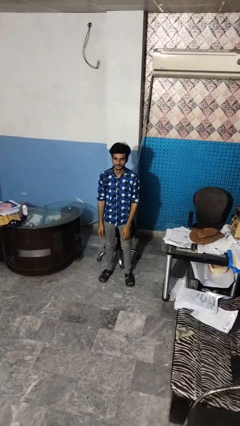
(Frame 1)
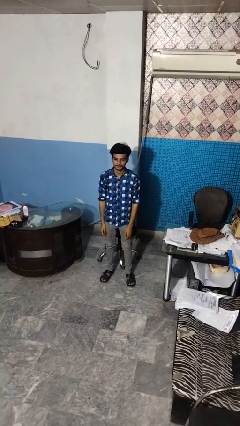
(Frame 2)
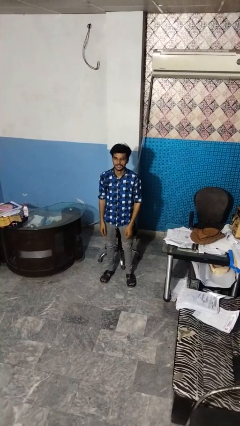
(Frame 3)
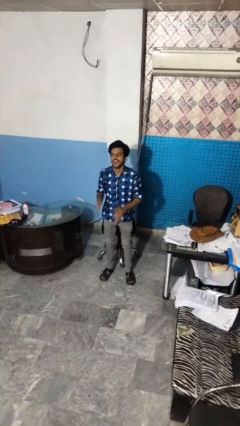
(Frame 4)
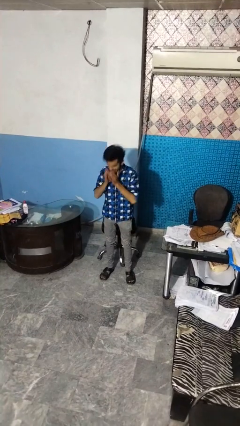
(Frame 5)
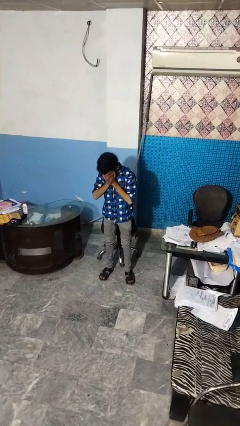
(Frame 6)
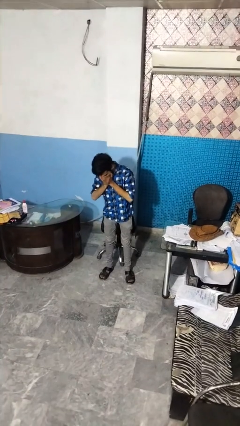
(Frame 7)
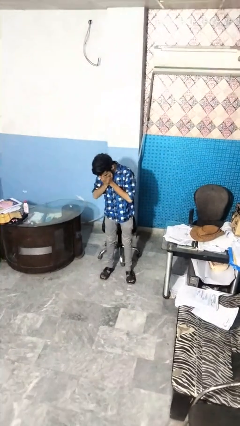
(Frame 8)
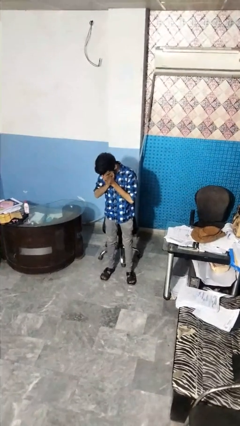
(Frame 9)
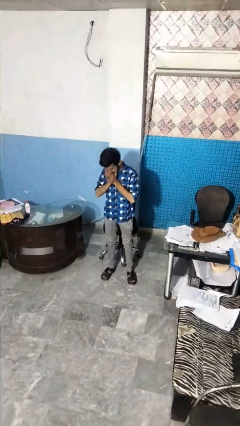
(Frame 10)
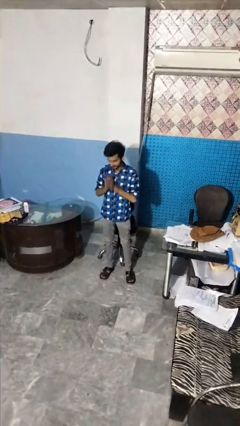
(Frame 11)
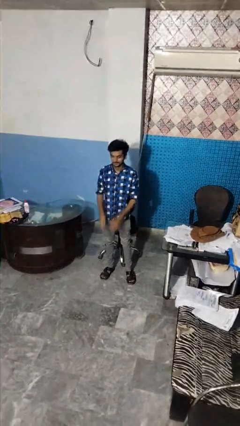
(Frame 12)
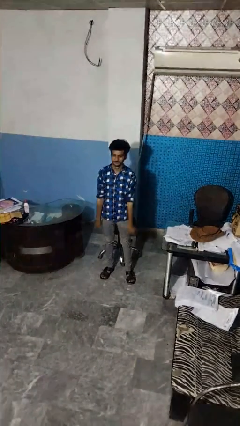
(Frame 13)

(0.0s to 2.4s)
person sneezes into hand

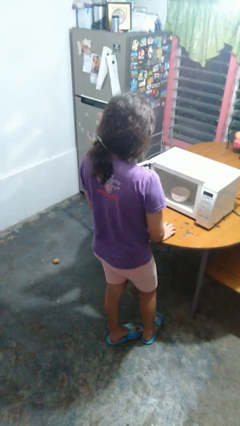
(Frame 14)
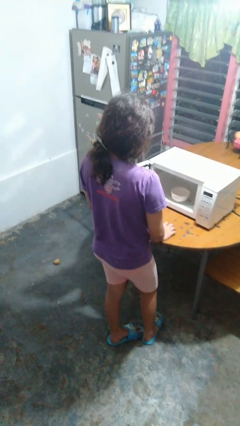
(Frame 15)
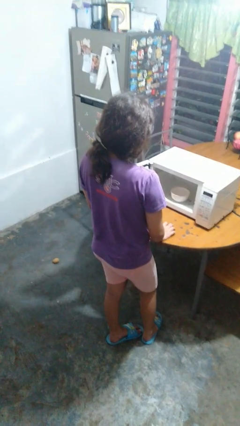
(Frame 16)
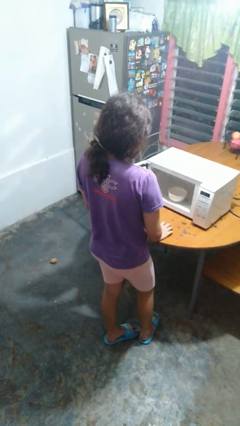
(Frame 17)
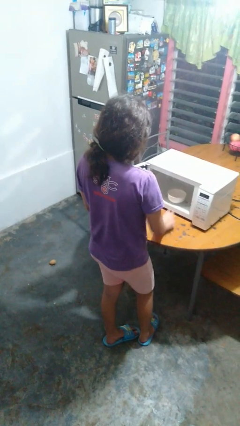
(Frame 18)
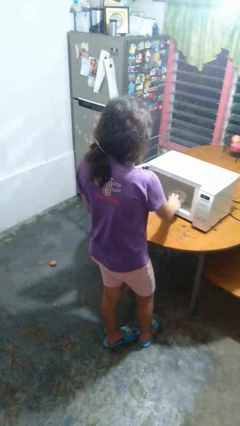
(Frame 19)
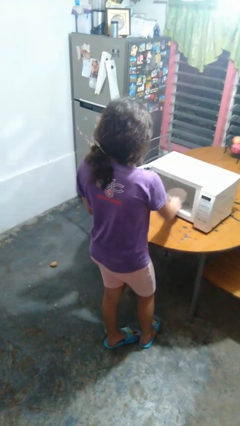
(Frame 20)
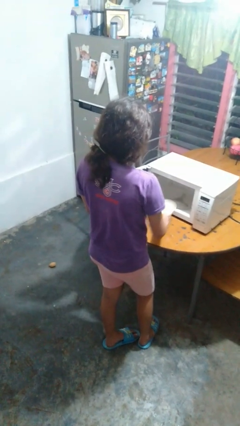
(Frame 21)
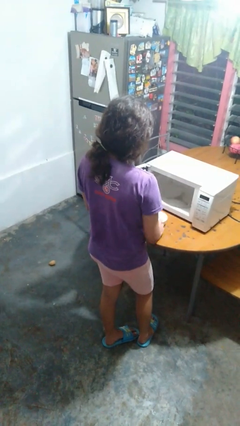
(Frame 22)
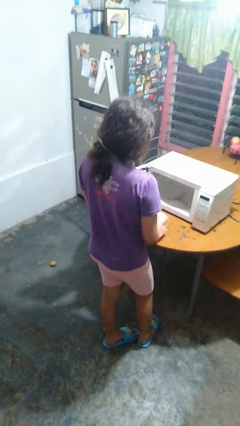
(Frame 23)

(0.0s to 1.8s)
person takes object from microwave

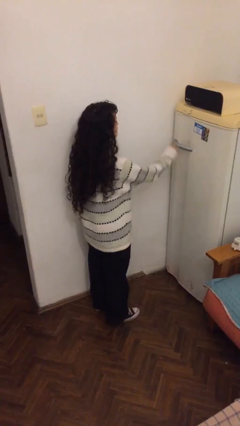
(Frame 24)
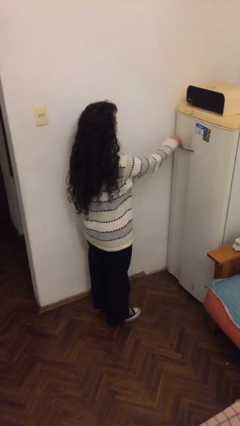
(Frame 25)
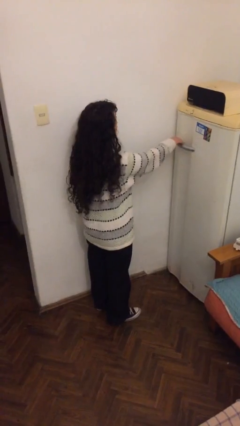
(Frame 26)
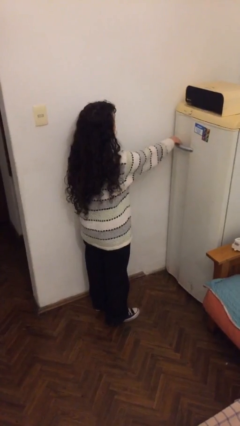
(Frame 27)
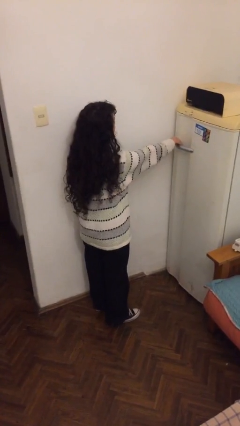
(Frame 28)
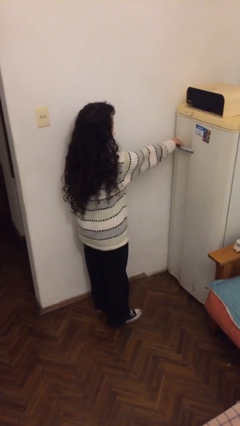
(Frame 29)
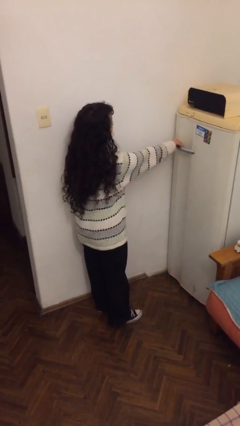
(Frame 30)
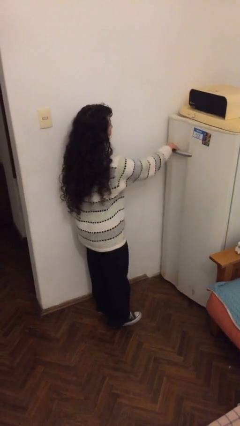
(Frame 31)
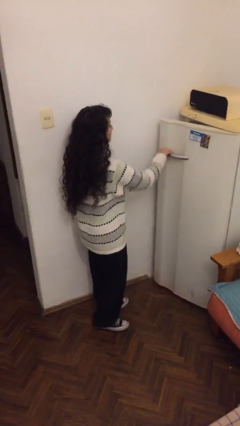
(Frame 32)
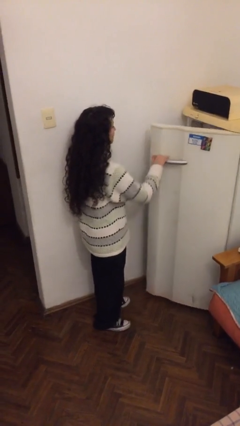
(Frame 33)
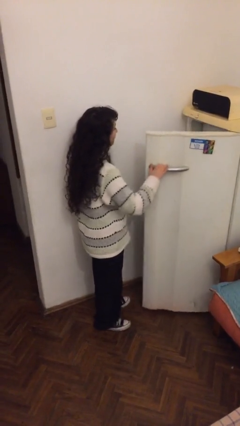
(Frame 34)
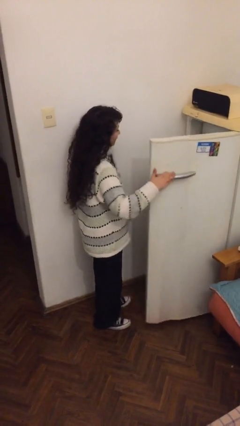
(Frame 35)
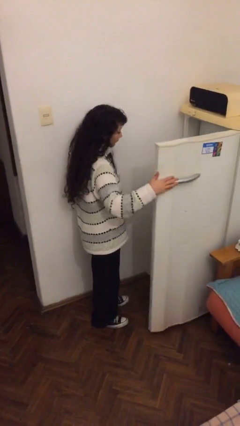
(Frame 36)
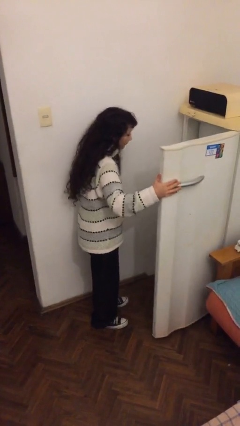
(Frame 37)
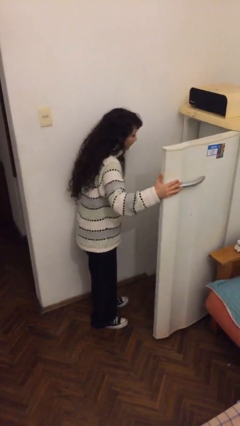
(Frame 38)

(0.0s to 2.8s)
person opens refrigerator

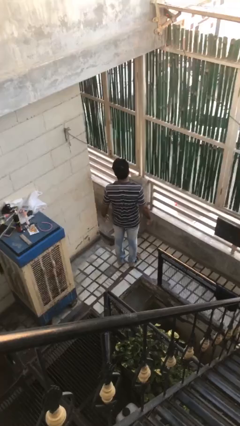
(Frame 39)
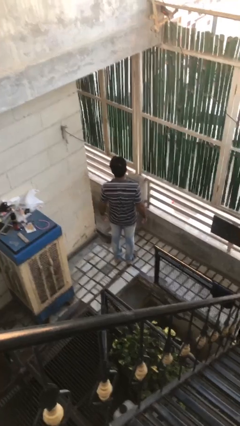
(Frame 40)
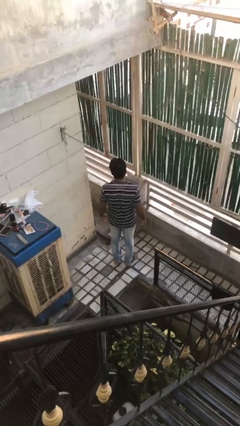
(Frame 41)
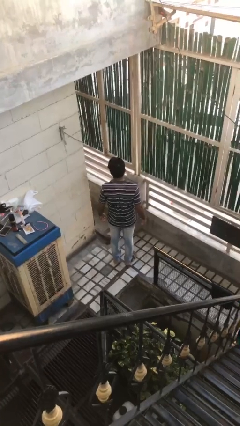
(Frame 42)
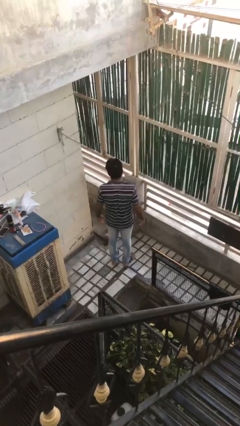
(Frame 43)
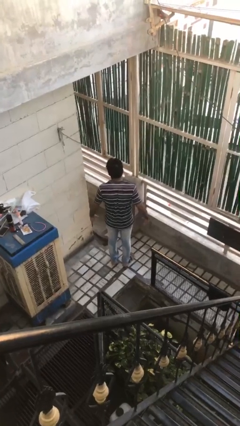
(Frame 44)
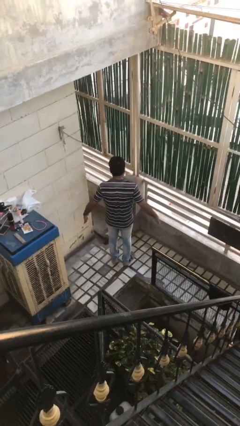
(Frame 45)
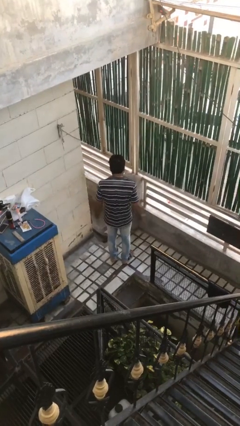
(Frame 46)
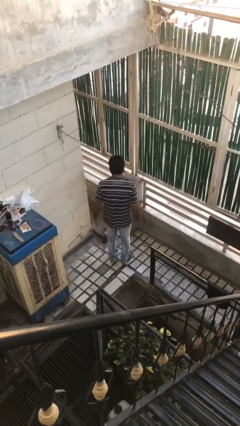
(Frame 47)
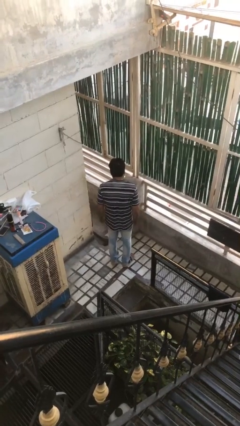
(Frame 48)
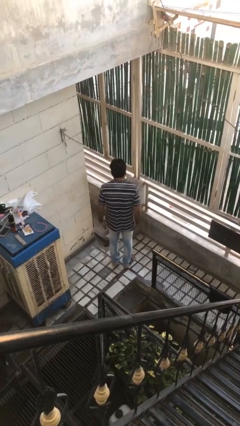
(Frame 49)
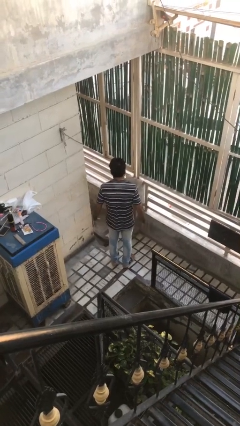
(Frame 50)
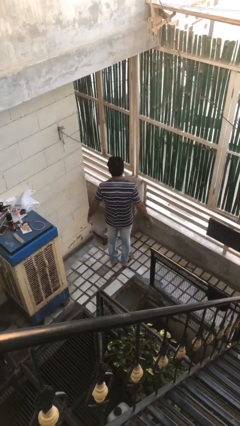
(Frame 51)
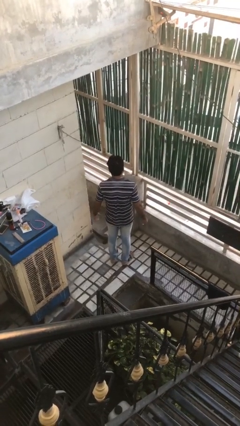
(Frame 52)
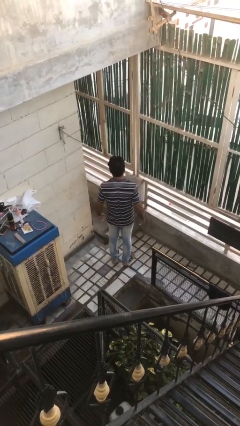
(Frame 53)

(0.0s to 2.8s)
person slaps hands on thighs

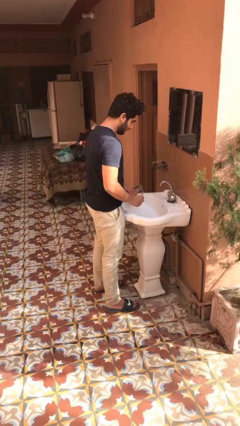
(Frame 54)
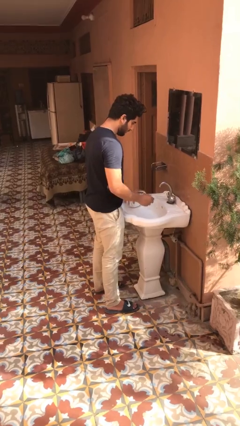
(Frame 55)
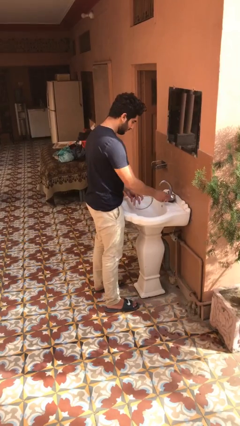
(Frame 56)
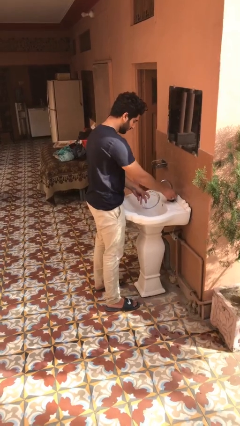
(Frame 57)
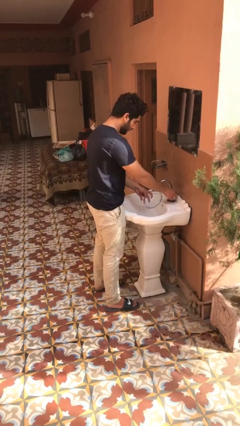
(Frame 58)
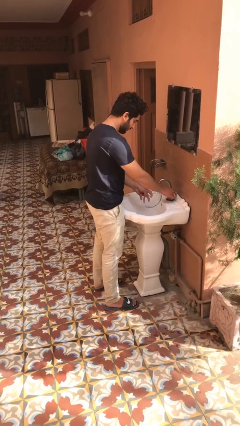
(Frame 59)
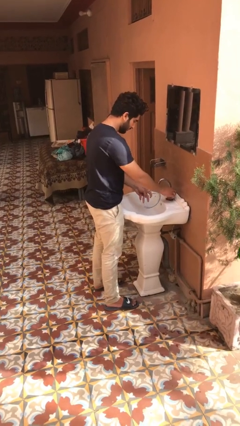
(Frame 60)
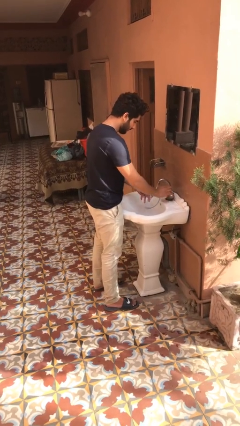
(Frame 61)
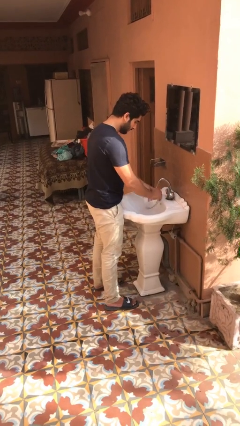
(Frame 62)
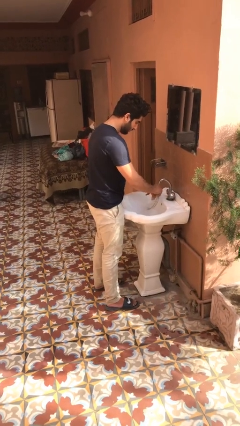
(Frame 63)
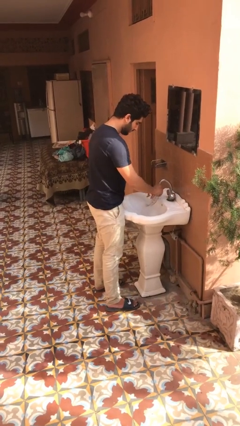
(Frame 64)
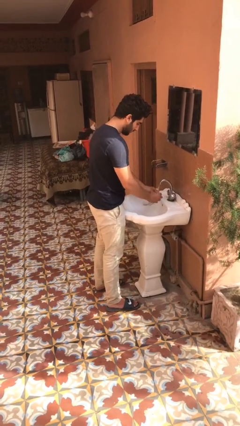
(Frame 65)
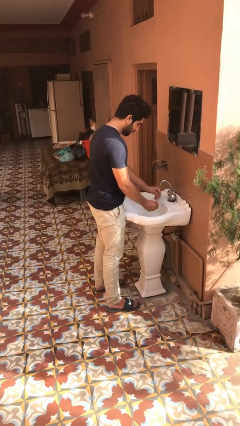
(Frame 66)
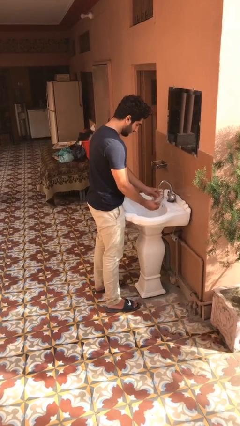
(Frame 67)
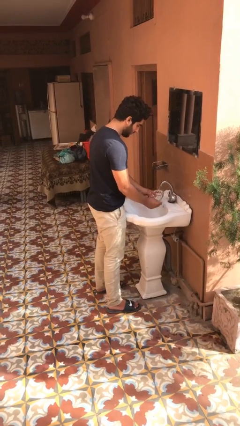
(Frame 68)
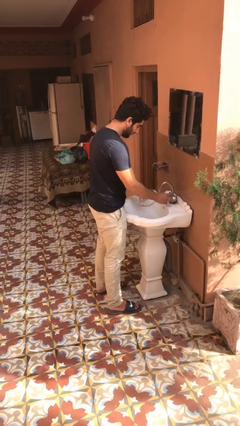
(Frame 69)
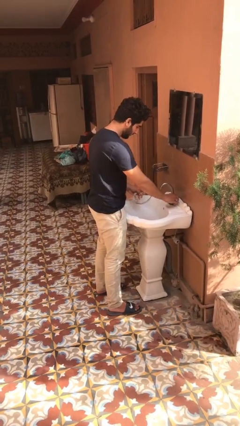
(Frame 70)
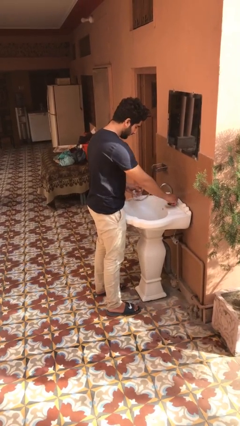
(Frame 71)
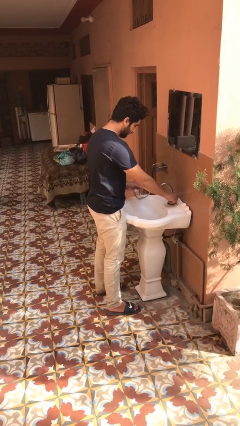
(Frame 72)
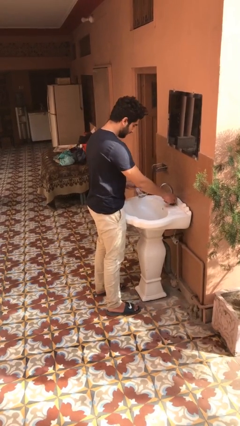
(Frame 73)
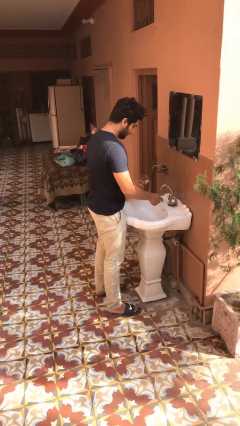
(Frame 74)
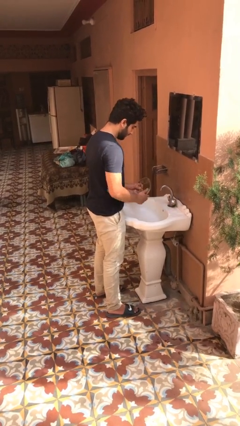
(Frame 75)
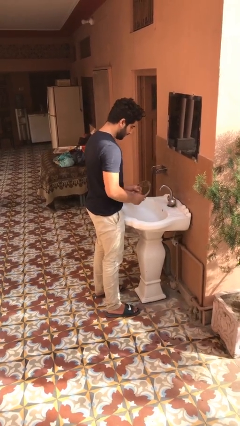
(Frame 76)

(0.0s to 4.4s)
person washes dish

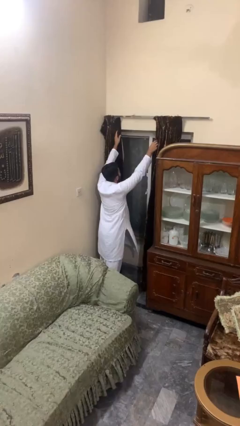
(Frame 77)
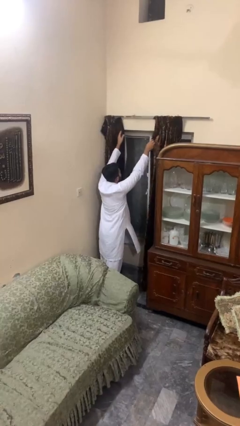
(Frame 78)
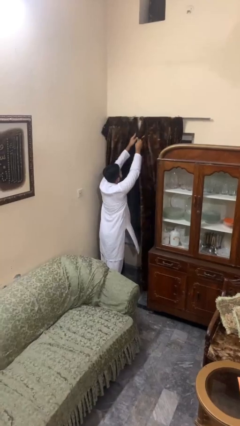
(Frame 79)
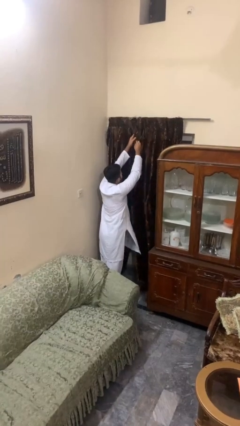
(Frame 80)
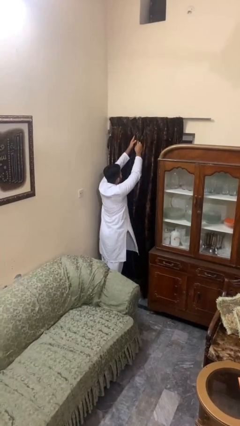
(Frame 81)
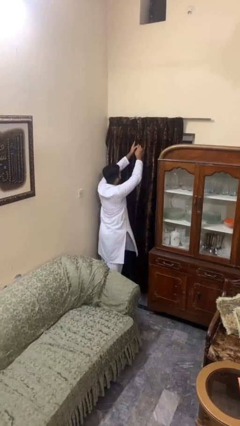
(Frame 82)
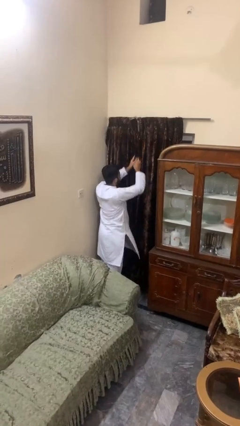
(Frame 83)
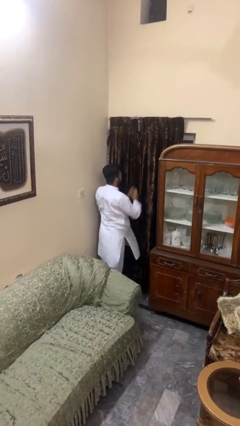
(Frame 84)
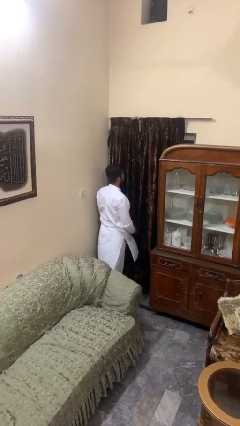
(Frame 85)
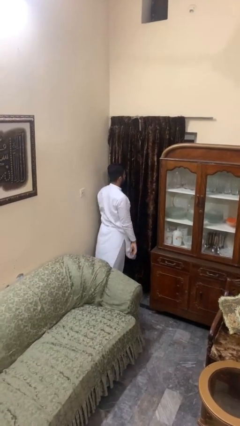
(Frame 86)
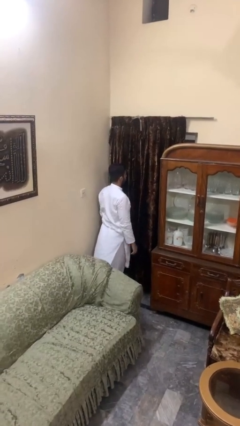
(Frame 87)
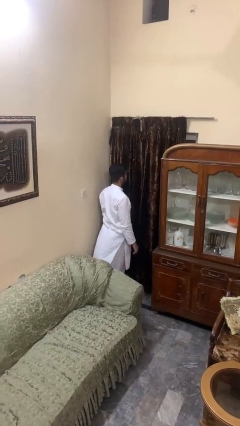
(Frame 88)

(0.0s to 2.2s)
person closes curtains

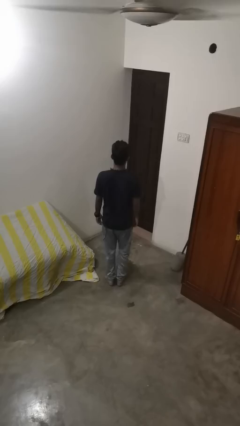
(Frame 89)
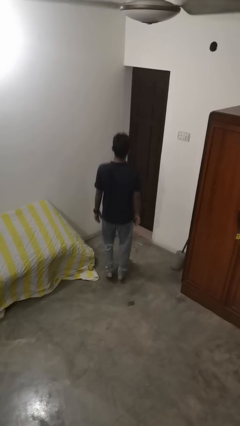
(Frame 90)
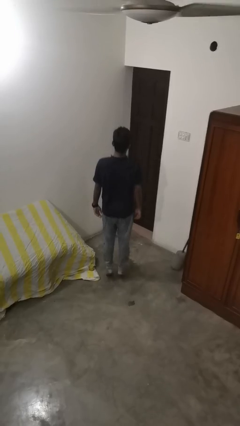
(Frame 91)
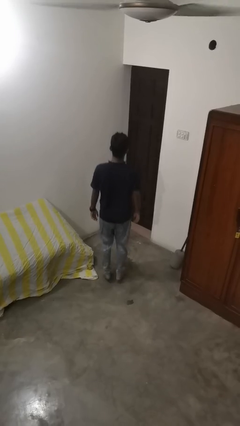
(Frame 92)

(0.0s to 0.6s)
person jumps
